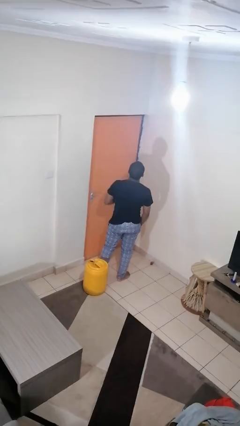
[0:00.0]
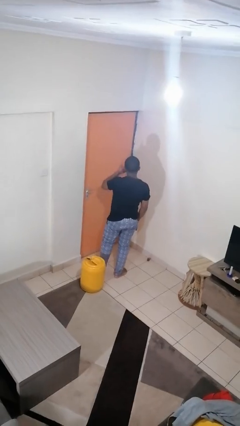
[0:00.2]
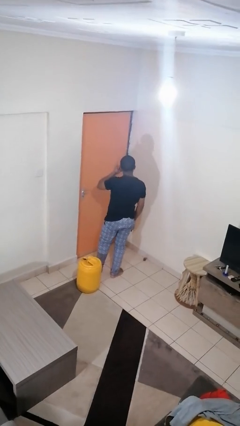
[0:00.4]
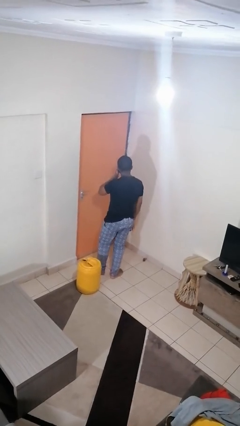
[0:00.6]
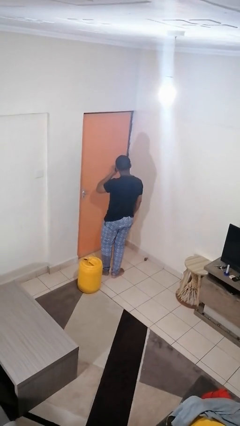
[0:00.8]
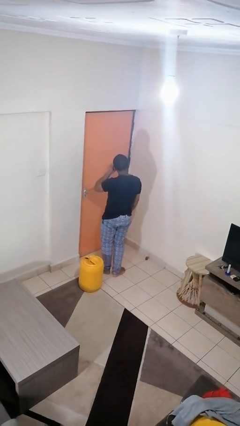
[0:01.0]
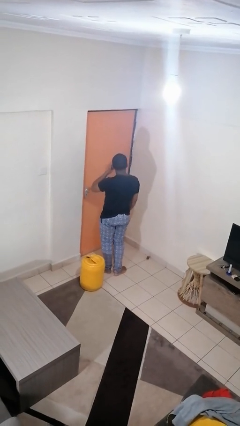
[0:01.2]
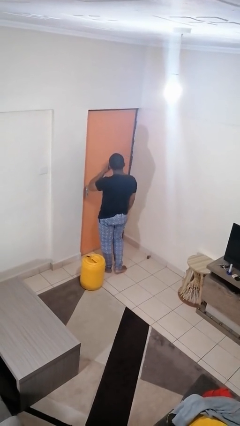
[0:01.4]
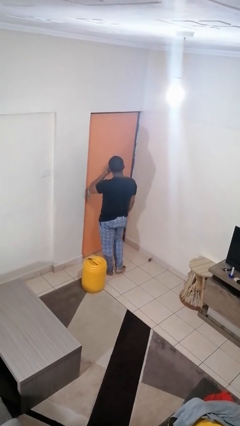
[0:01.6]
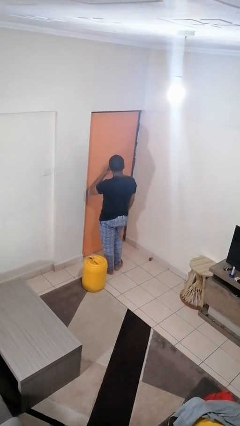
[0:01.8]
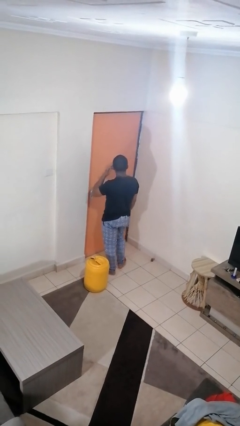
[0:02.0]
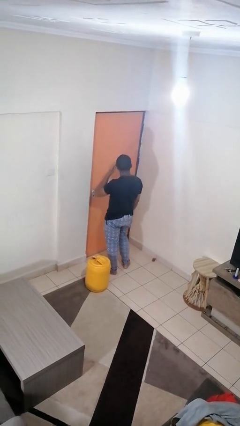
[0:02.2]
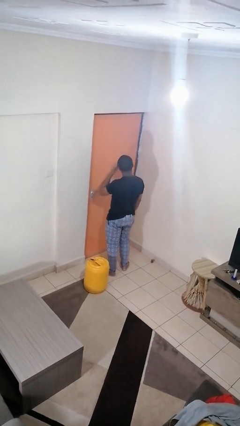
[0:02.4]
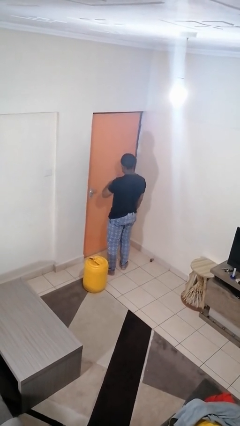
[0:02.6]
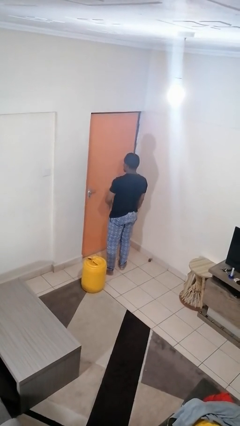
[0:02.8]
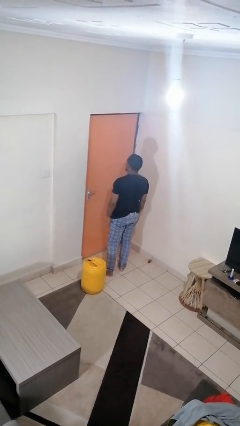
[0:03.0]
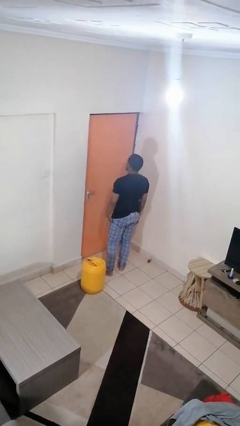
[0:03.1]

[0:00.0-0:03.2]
person rubs eyes

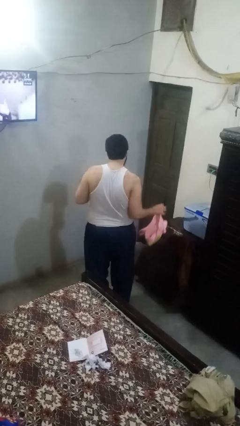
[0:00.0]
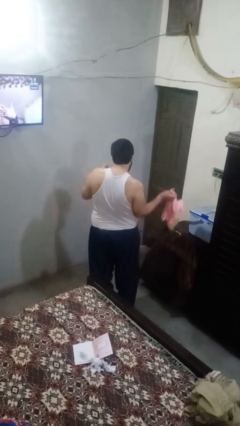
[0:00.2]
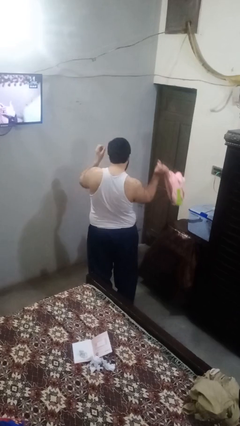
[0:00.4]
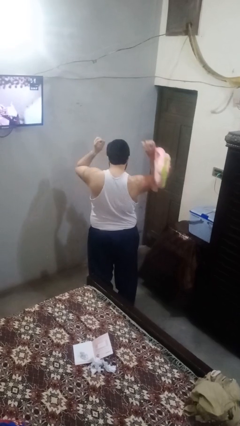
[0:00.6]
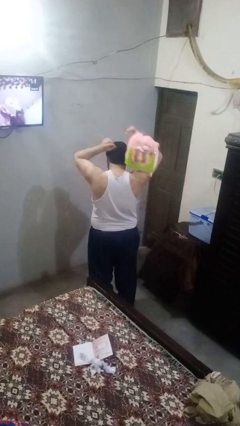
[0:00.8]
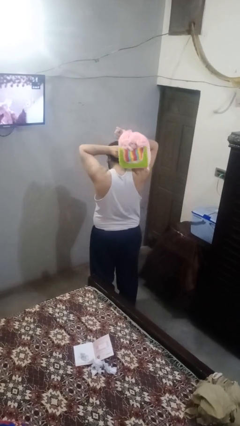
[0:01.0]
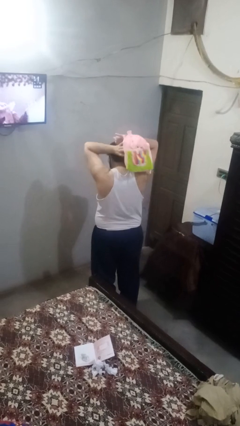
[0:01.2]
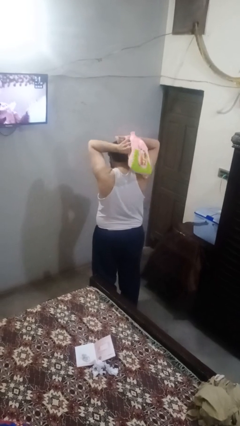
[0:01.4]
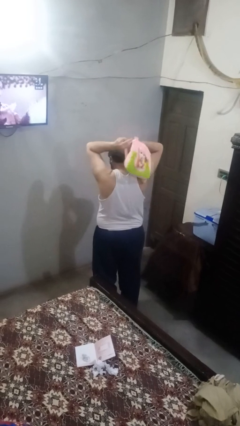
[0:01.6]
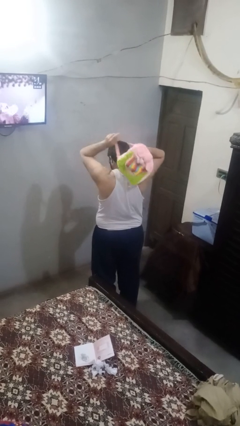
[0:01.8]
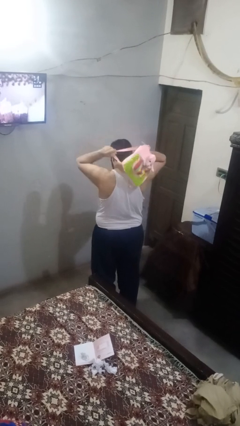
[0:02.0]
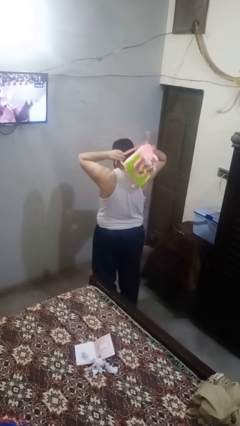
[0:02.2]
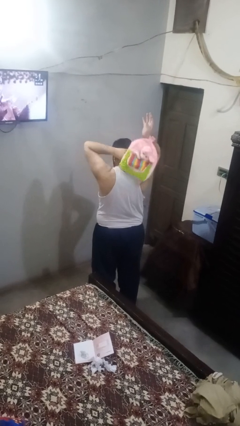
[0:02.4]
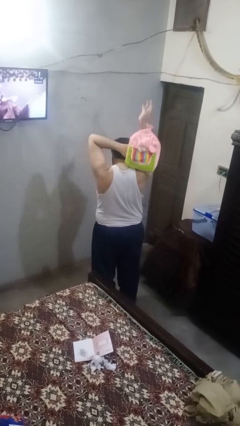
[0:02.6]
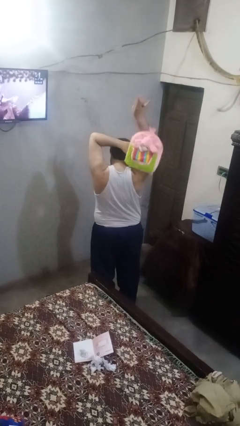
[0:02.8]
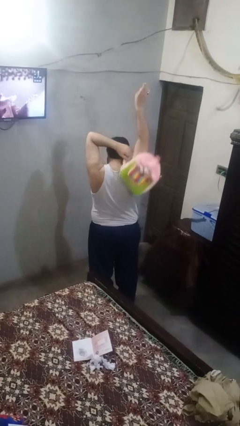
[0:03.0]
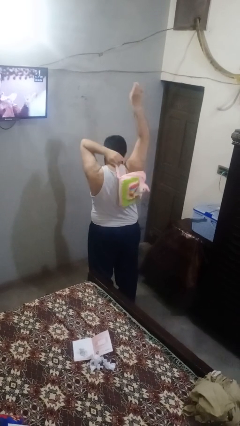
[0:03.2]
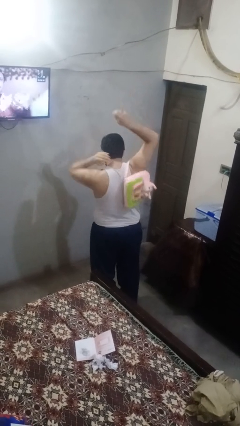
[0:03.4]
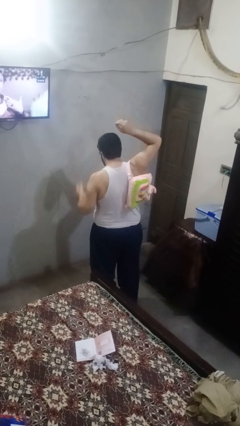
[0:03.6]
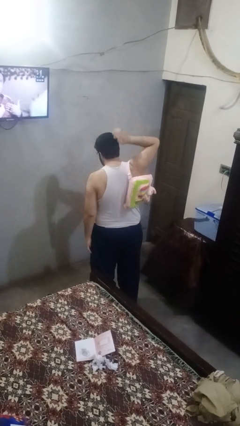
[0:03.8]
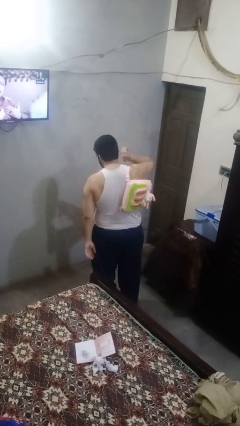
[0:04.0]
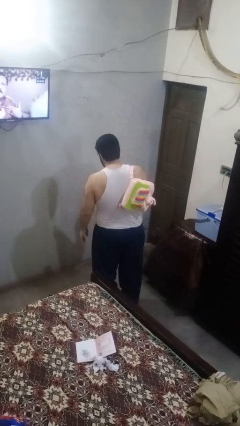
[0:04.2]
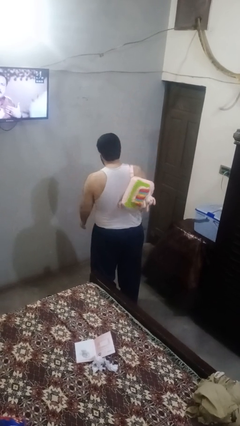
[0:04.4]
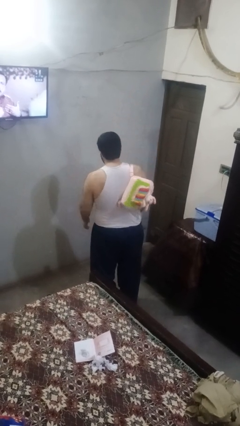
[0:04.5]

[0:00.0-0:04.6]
person puts on backpack

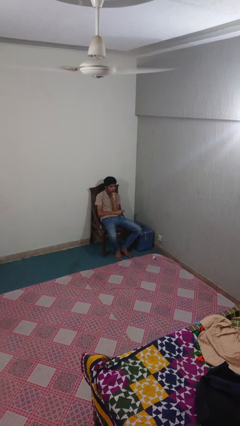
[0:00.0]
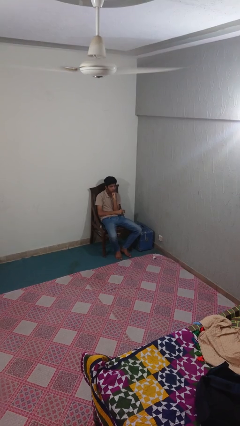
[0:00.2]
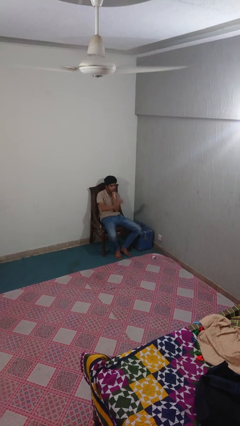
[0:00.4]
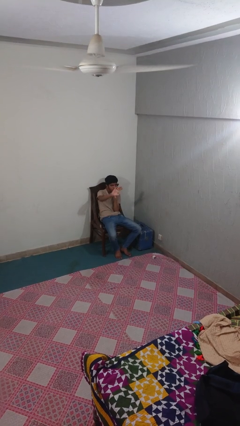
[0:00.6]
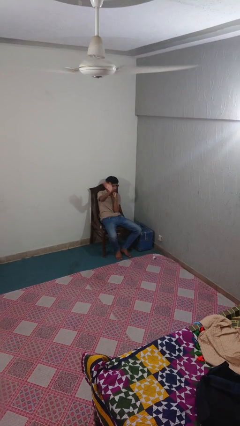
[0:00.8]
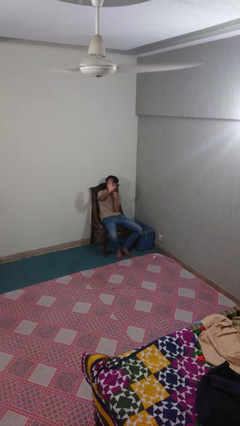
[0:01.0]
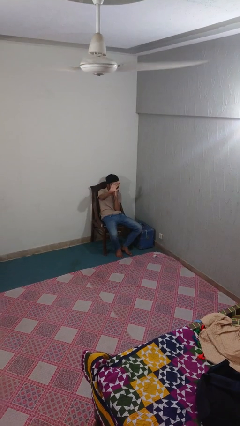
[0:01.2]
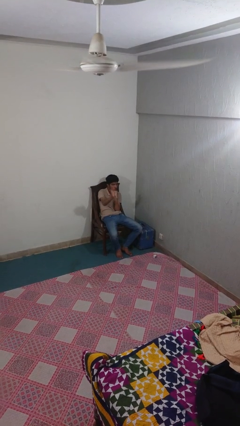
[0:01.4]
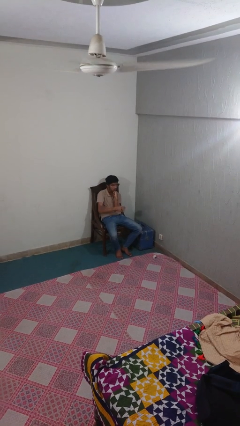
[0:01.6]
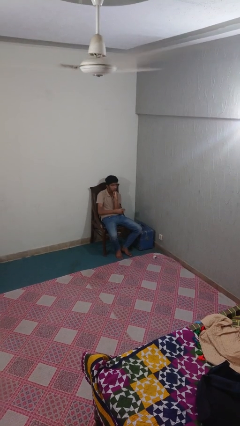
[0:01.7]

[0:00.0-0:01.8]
person waves at person

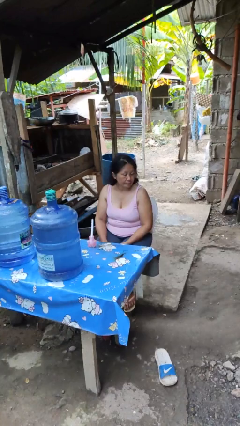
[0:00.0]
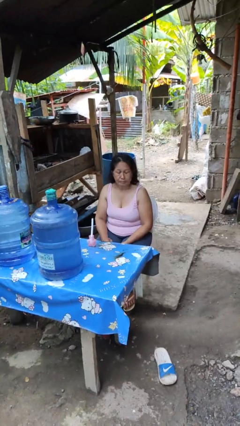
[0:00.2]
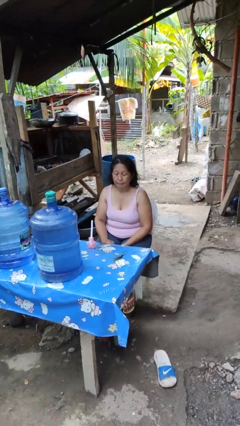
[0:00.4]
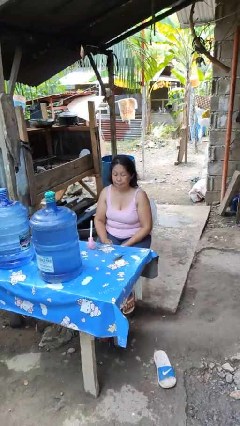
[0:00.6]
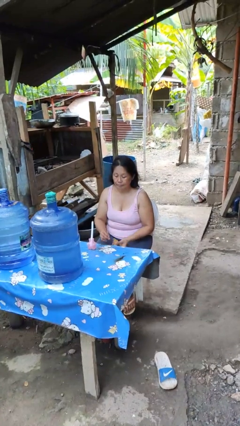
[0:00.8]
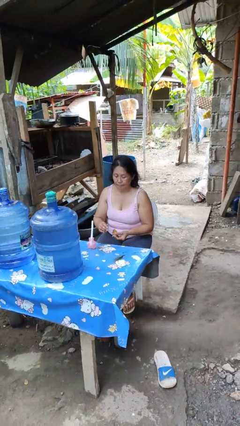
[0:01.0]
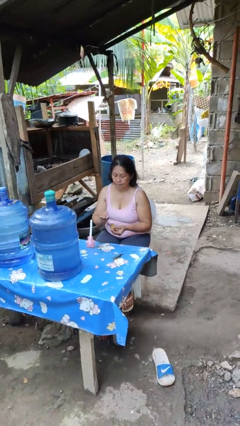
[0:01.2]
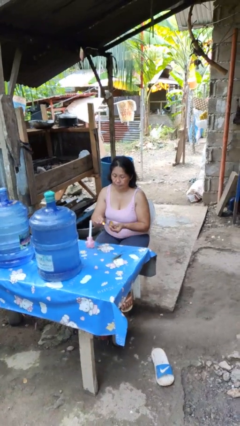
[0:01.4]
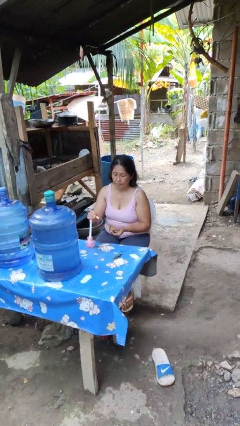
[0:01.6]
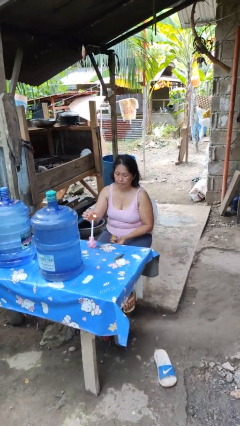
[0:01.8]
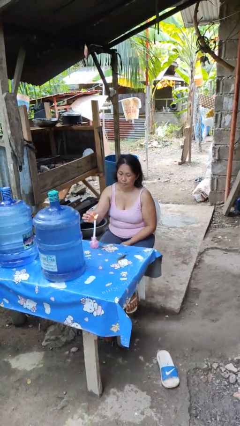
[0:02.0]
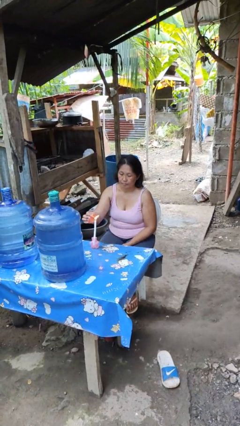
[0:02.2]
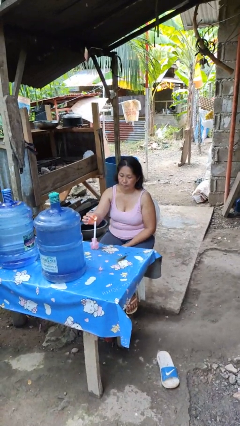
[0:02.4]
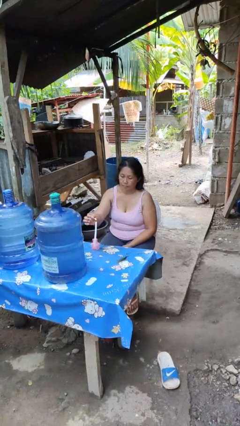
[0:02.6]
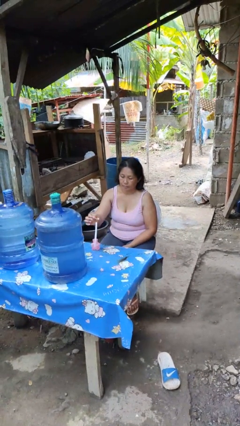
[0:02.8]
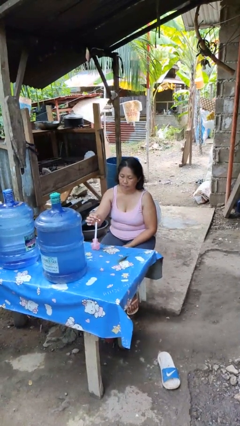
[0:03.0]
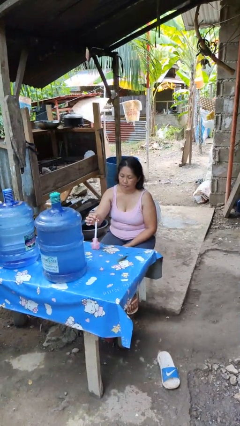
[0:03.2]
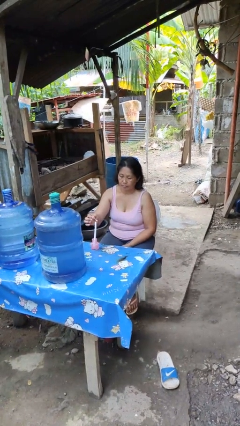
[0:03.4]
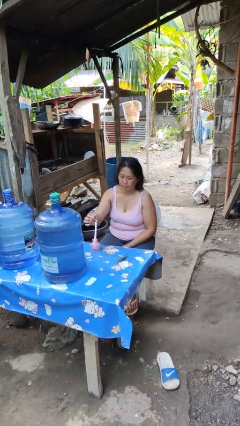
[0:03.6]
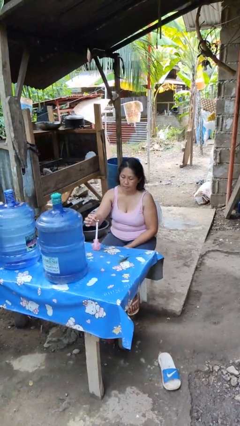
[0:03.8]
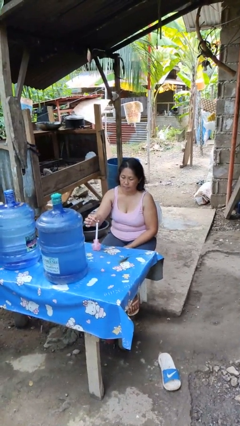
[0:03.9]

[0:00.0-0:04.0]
person lights candle

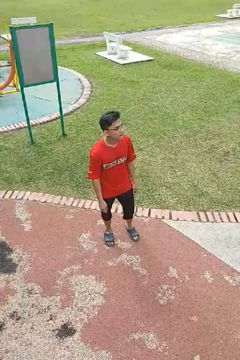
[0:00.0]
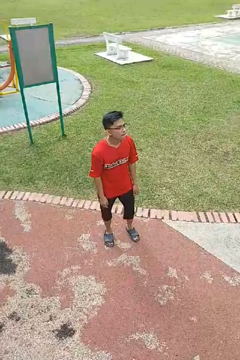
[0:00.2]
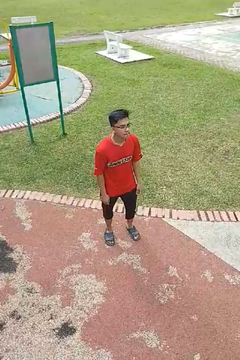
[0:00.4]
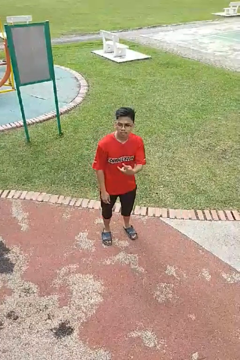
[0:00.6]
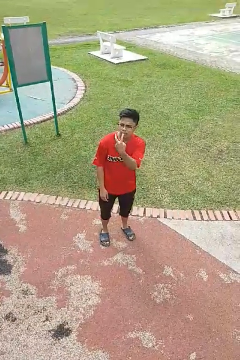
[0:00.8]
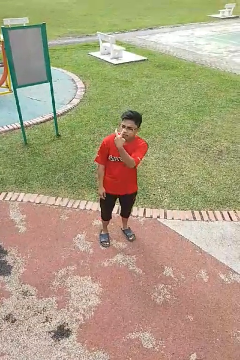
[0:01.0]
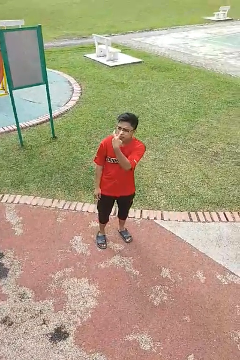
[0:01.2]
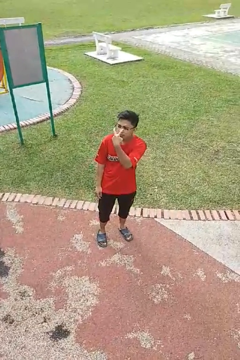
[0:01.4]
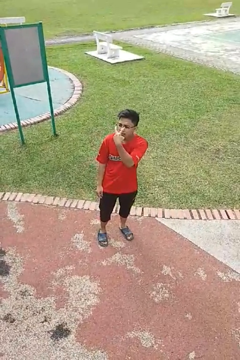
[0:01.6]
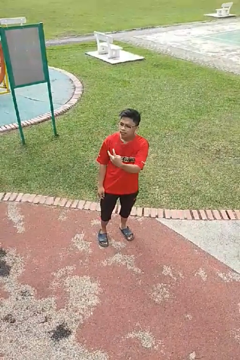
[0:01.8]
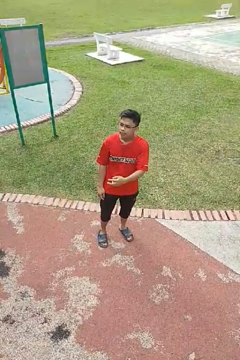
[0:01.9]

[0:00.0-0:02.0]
person gestures watch closely

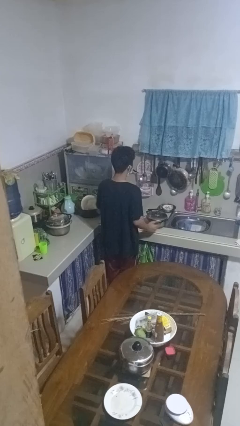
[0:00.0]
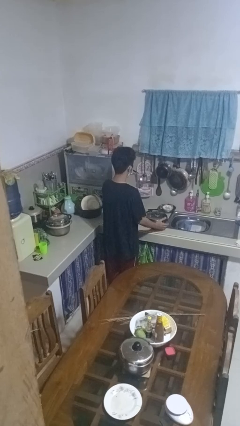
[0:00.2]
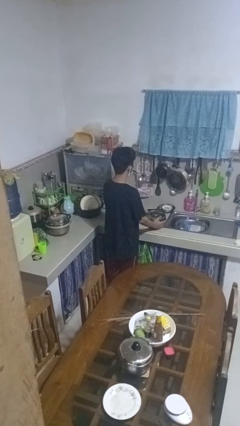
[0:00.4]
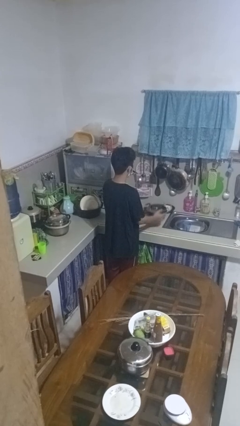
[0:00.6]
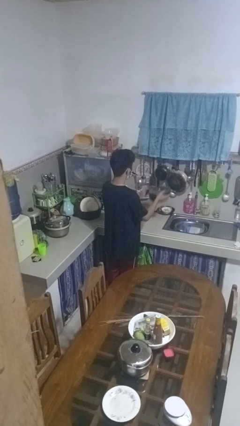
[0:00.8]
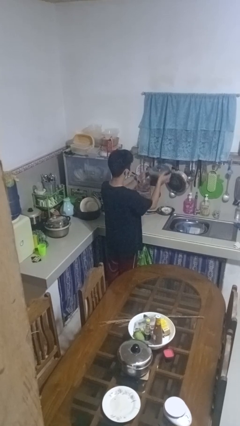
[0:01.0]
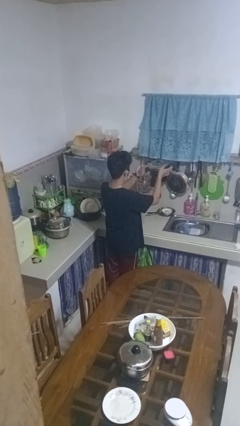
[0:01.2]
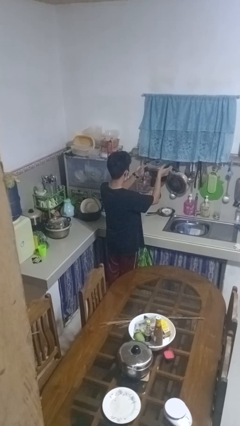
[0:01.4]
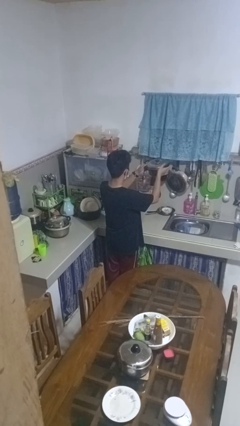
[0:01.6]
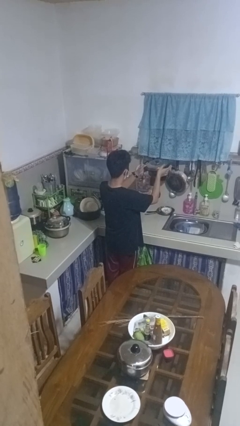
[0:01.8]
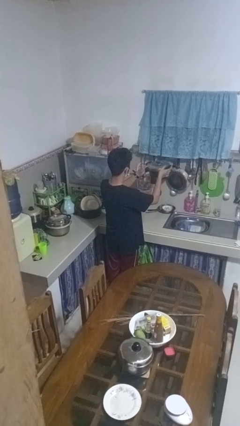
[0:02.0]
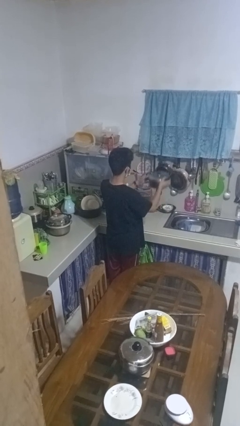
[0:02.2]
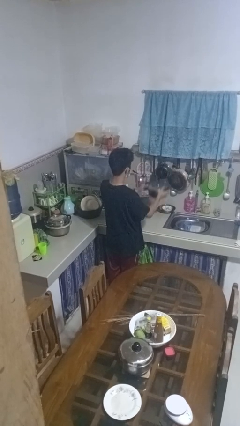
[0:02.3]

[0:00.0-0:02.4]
person picks up object from countertop
